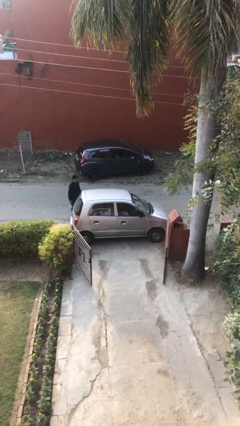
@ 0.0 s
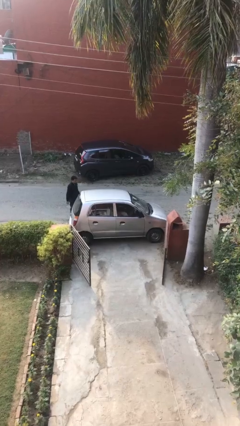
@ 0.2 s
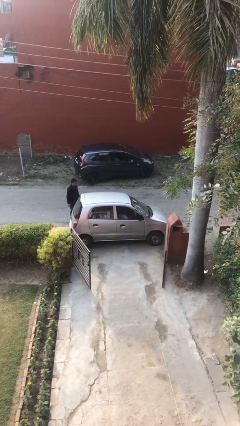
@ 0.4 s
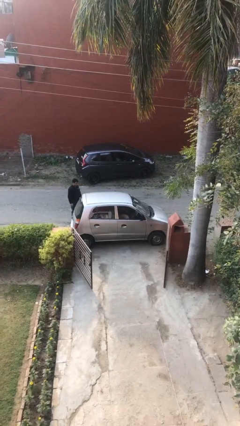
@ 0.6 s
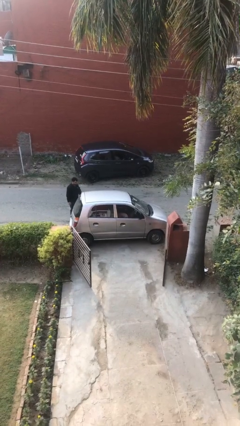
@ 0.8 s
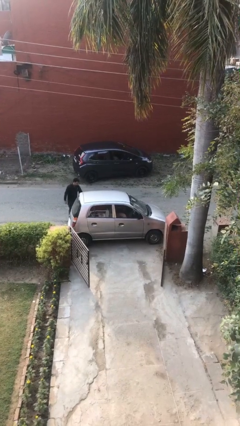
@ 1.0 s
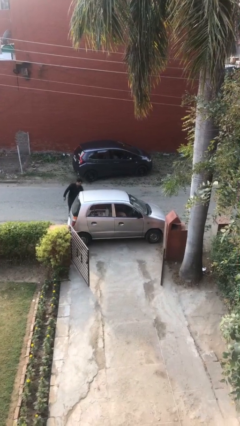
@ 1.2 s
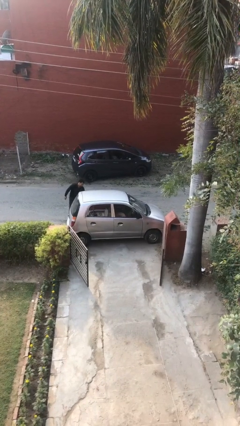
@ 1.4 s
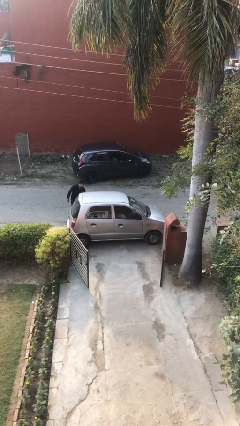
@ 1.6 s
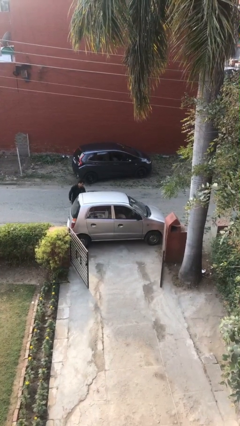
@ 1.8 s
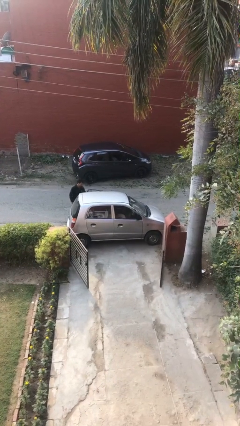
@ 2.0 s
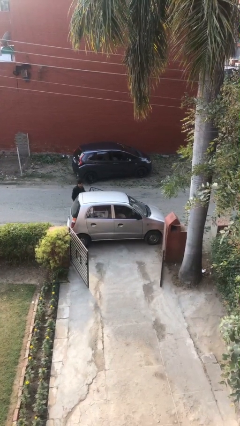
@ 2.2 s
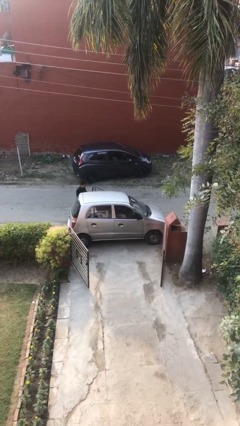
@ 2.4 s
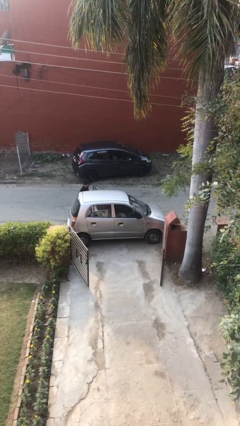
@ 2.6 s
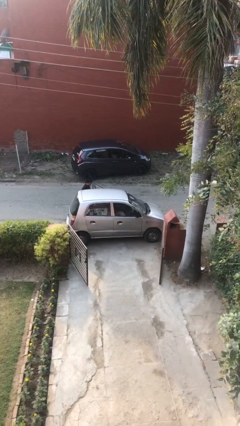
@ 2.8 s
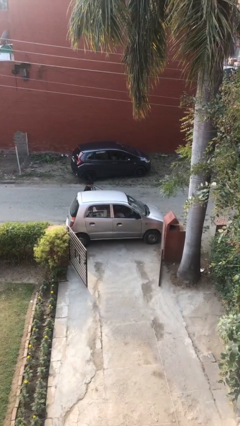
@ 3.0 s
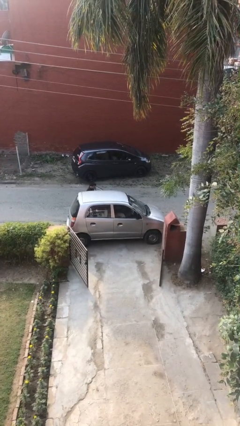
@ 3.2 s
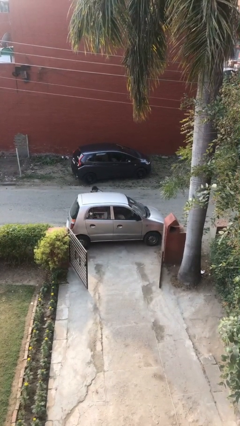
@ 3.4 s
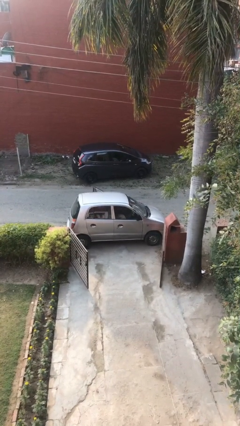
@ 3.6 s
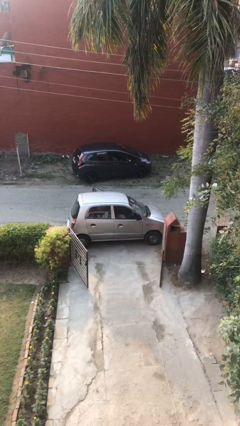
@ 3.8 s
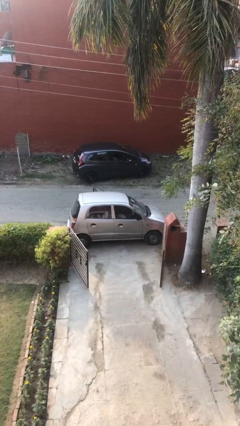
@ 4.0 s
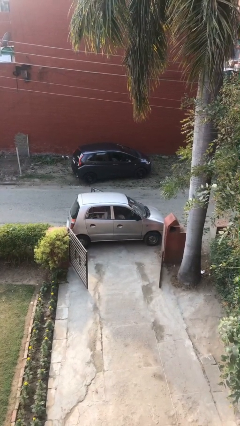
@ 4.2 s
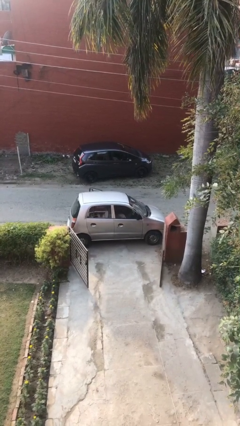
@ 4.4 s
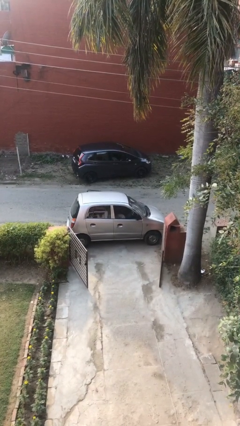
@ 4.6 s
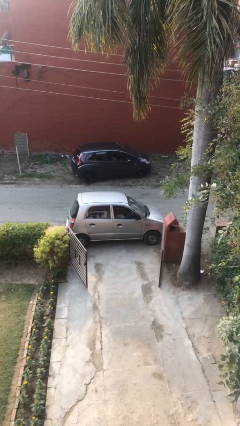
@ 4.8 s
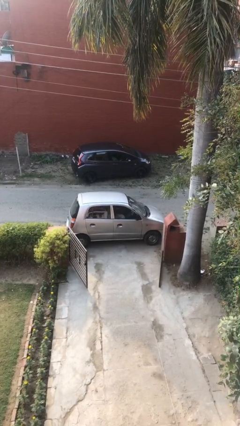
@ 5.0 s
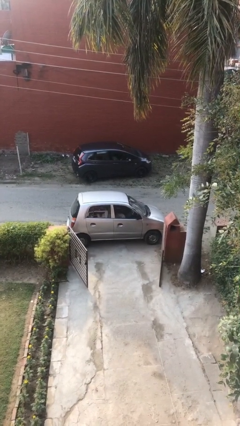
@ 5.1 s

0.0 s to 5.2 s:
car picks up person

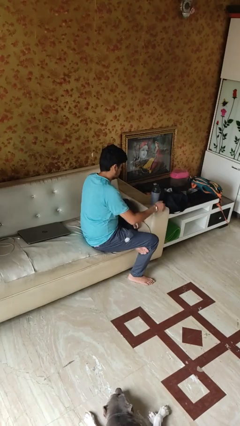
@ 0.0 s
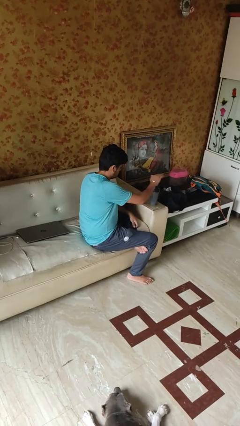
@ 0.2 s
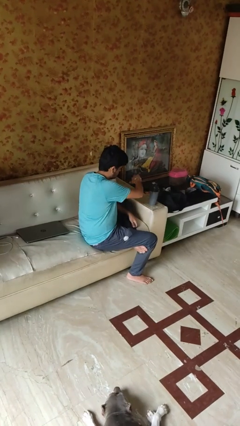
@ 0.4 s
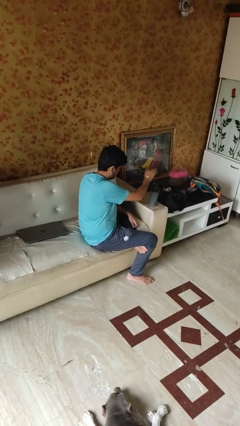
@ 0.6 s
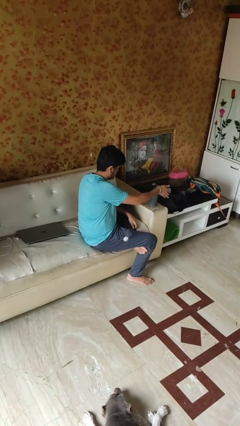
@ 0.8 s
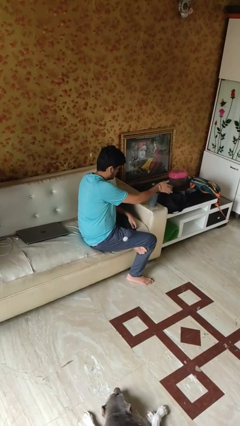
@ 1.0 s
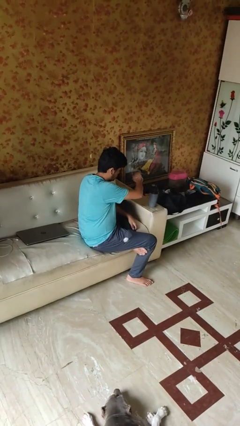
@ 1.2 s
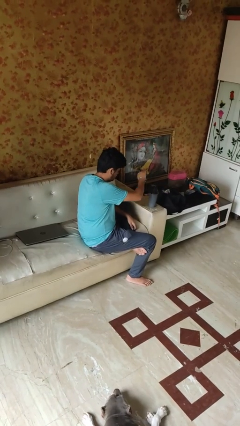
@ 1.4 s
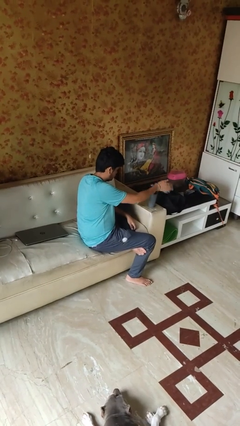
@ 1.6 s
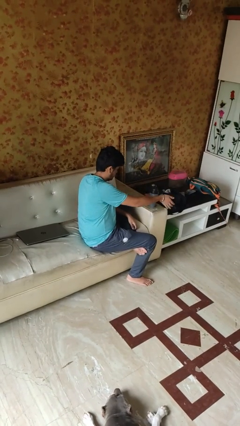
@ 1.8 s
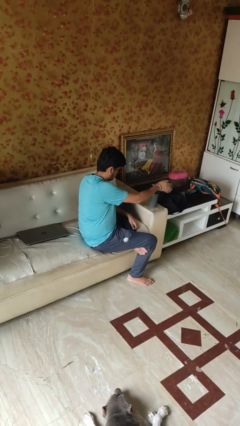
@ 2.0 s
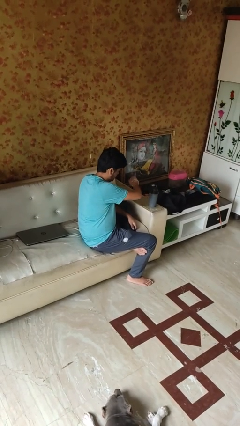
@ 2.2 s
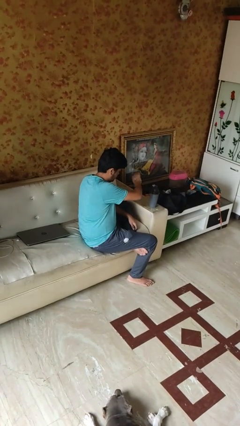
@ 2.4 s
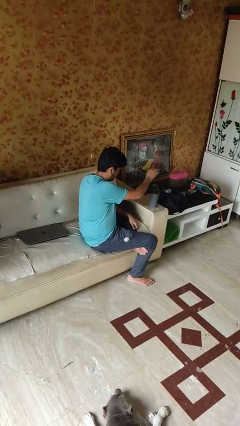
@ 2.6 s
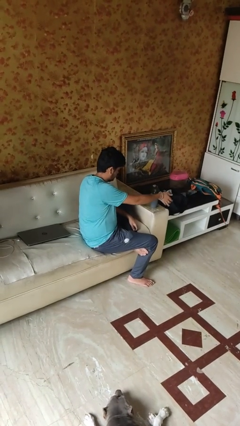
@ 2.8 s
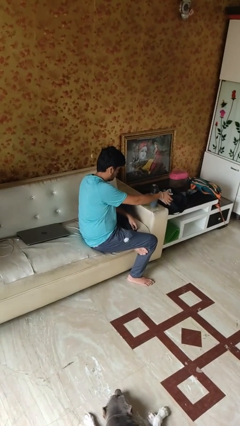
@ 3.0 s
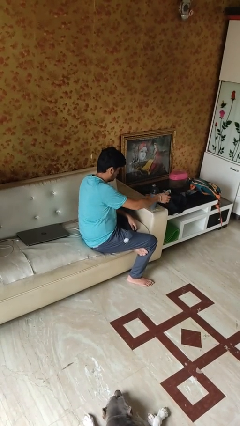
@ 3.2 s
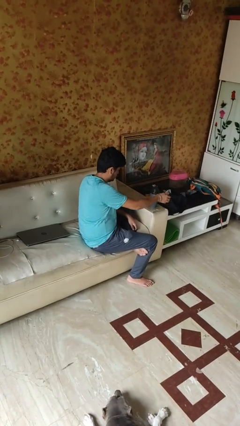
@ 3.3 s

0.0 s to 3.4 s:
person waves hand over object

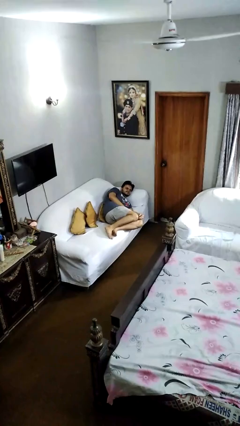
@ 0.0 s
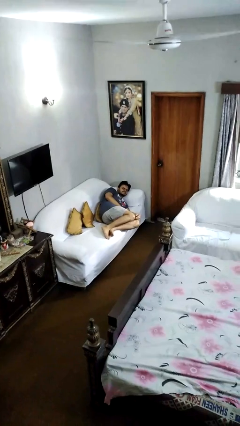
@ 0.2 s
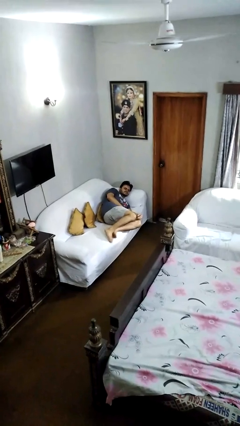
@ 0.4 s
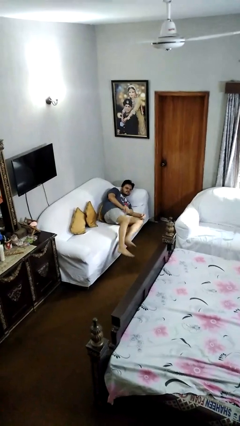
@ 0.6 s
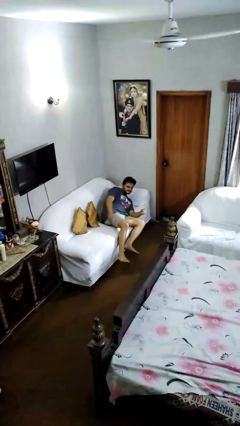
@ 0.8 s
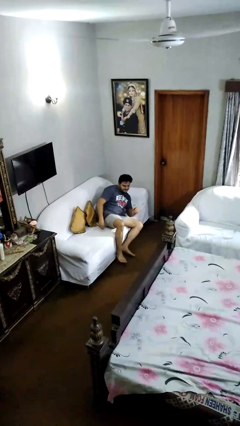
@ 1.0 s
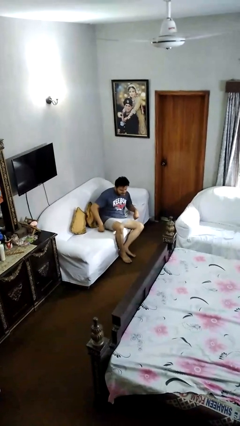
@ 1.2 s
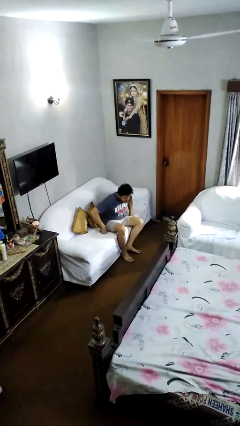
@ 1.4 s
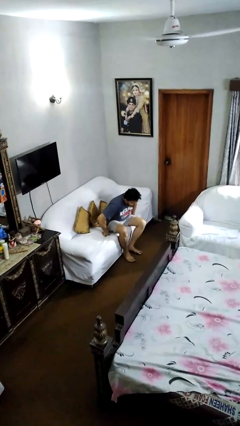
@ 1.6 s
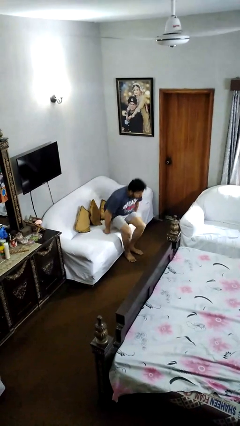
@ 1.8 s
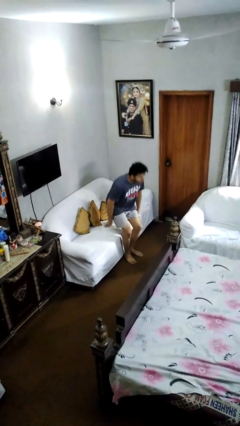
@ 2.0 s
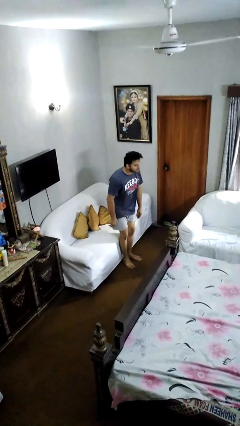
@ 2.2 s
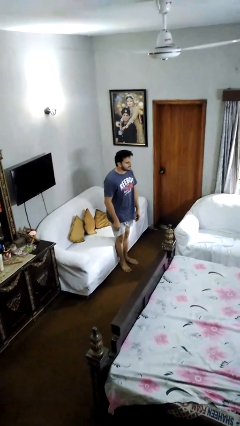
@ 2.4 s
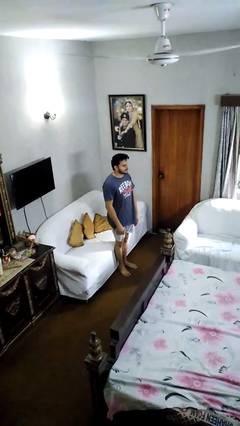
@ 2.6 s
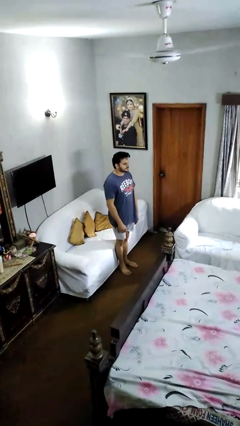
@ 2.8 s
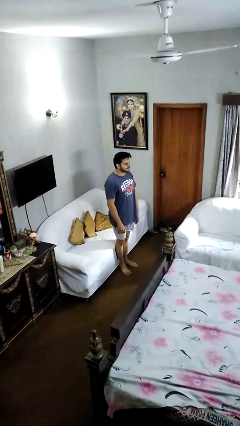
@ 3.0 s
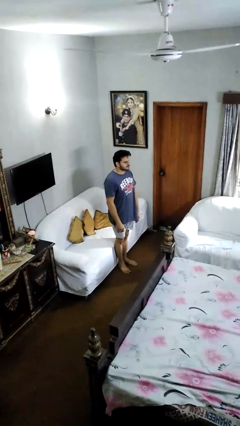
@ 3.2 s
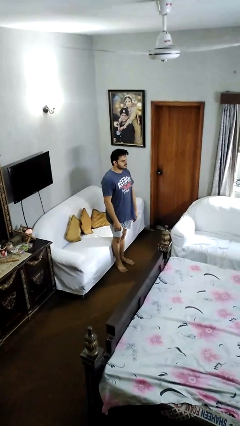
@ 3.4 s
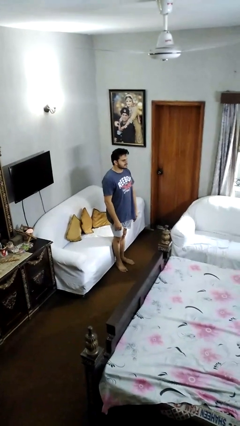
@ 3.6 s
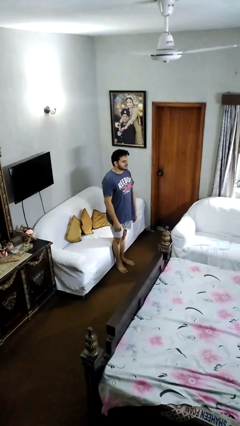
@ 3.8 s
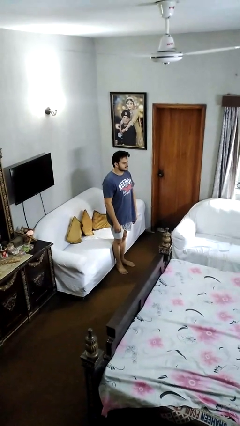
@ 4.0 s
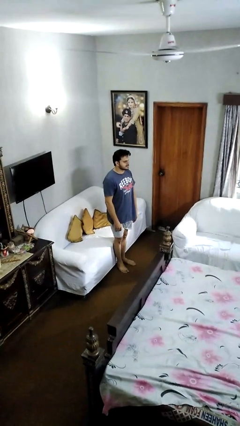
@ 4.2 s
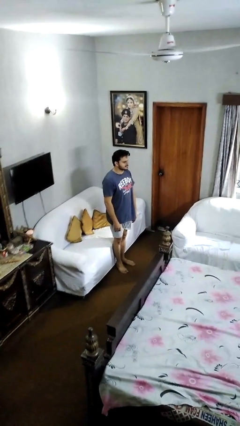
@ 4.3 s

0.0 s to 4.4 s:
person stands up

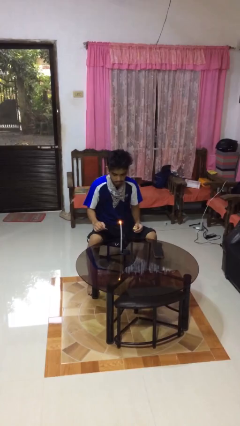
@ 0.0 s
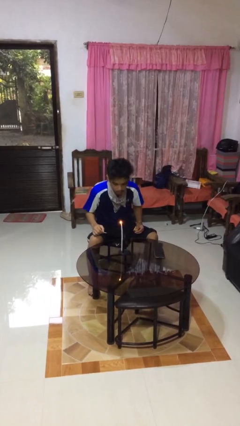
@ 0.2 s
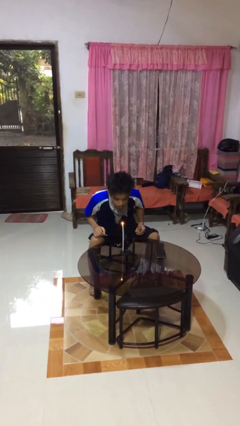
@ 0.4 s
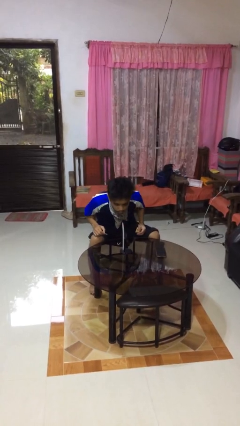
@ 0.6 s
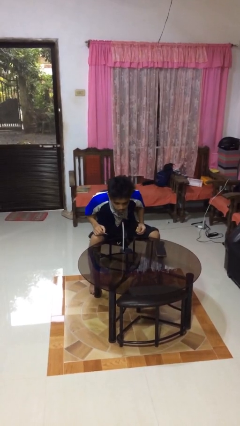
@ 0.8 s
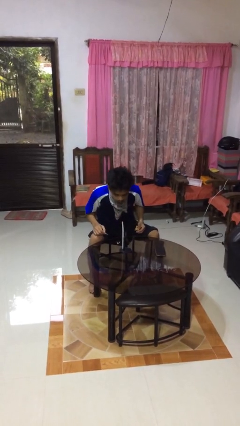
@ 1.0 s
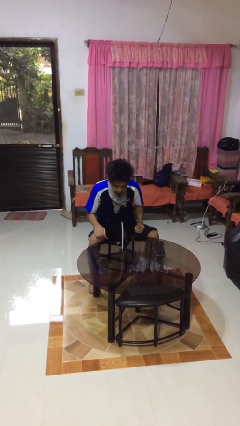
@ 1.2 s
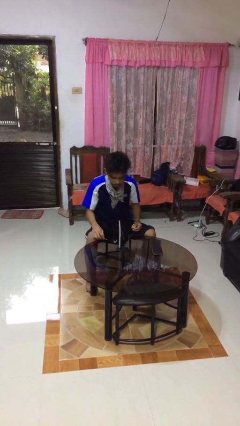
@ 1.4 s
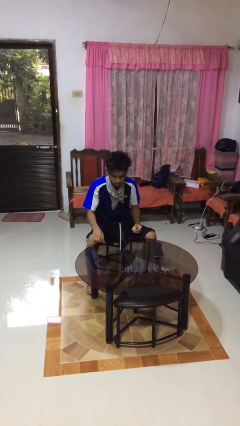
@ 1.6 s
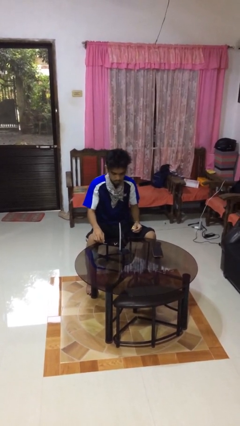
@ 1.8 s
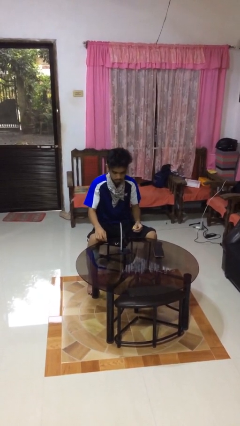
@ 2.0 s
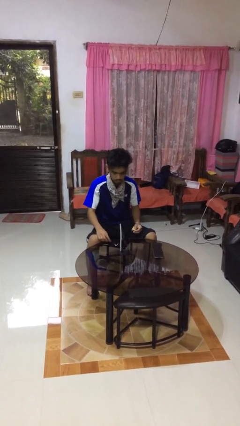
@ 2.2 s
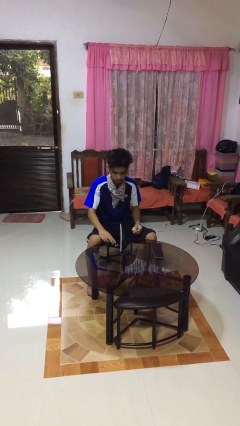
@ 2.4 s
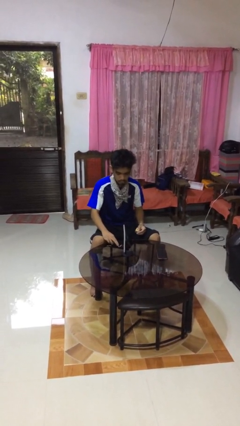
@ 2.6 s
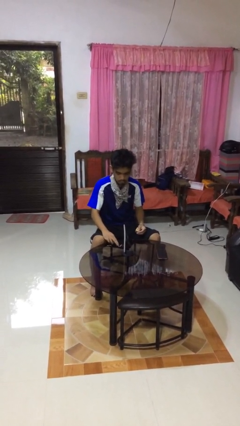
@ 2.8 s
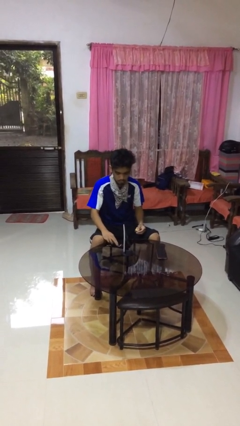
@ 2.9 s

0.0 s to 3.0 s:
person extinguishes candle

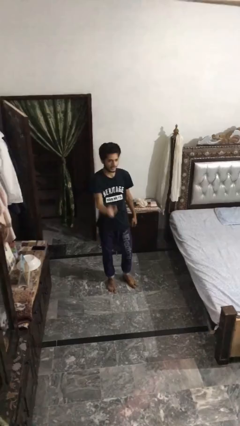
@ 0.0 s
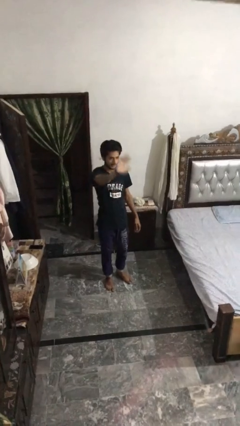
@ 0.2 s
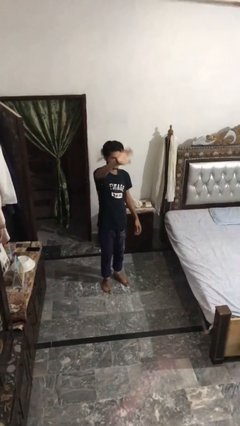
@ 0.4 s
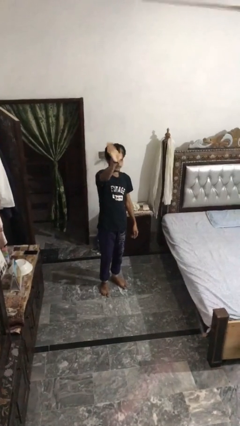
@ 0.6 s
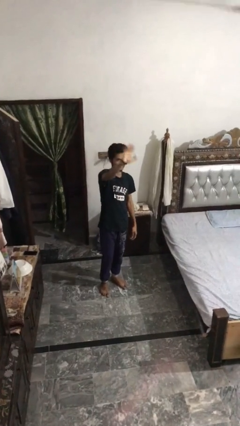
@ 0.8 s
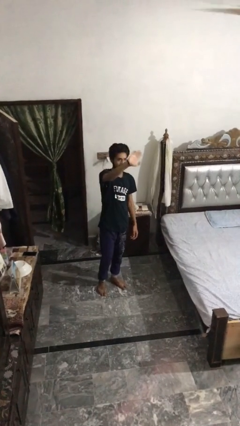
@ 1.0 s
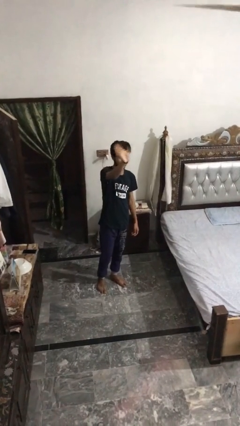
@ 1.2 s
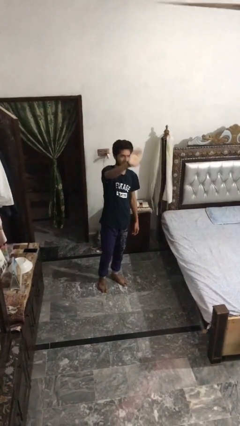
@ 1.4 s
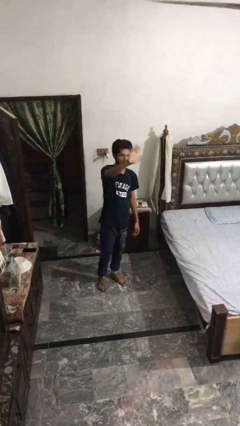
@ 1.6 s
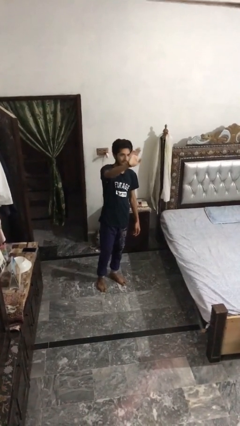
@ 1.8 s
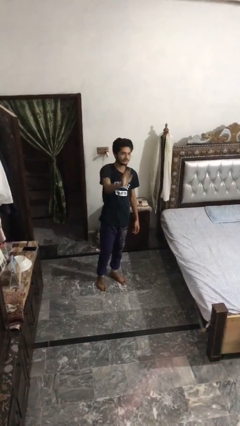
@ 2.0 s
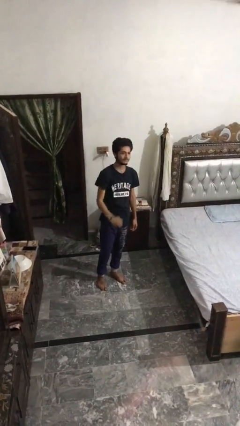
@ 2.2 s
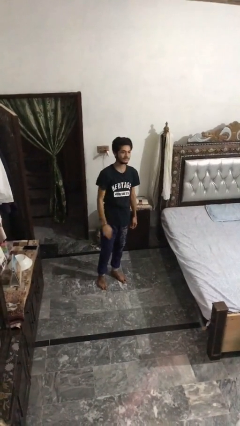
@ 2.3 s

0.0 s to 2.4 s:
person waves at person
